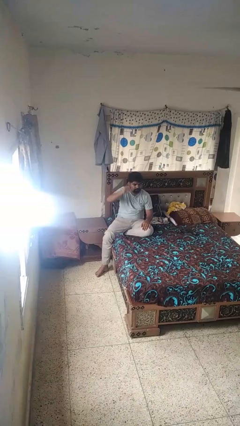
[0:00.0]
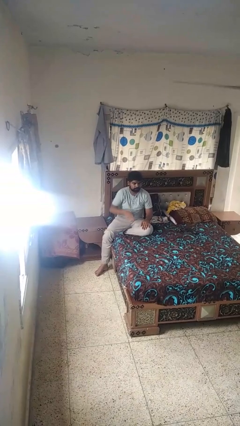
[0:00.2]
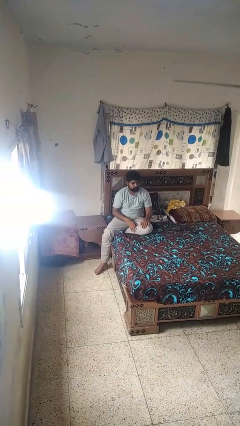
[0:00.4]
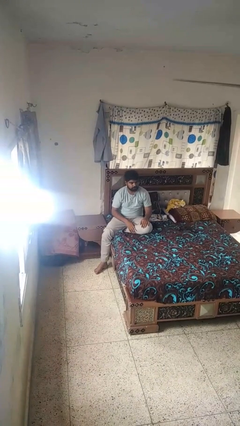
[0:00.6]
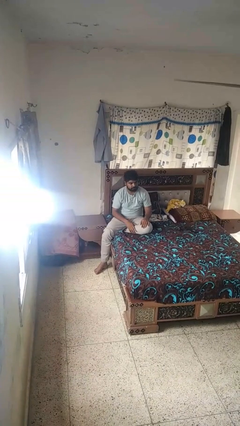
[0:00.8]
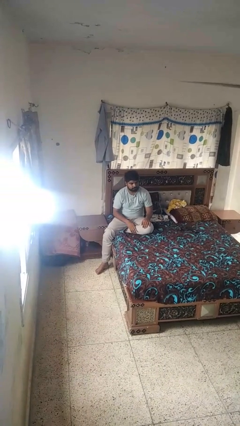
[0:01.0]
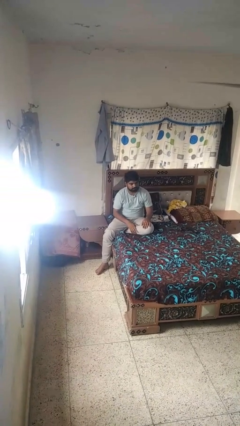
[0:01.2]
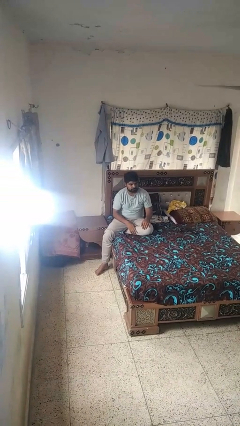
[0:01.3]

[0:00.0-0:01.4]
person gestures lower hand

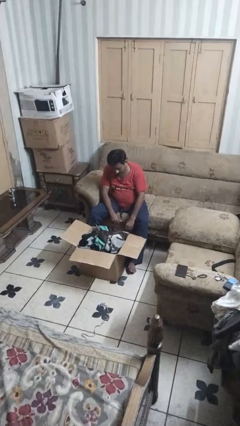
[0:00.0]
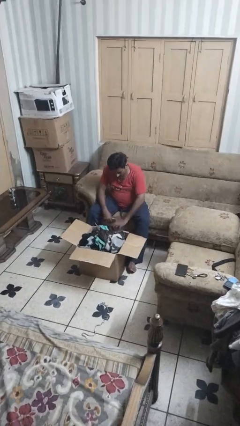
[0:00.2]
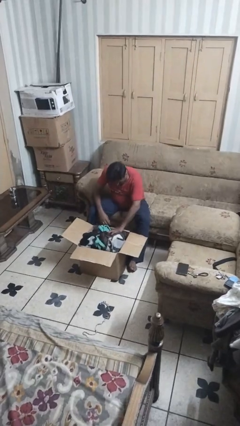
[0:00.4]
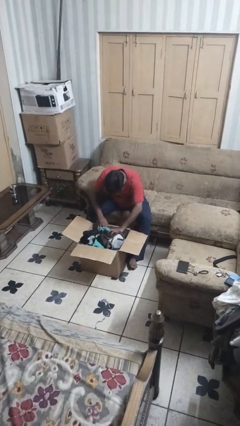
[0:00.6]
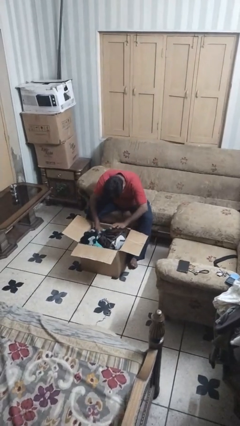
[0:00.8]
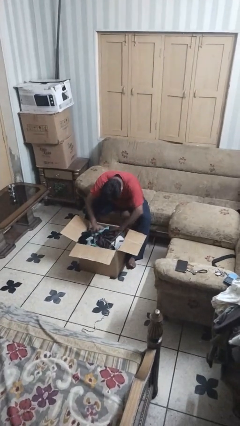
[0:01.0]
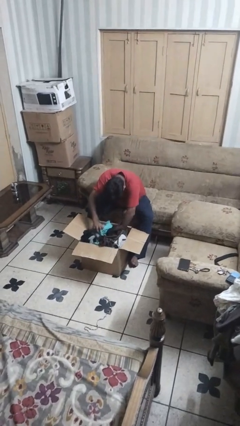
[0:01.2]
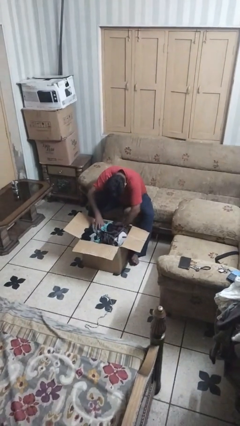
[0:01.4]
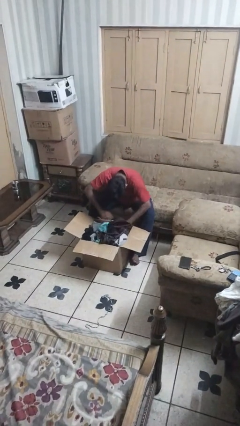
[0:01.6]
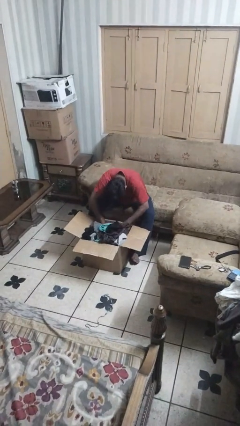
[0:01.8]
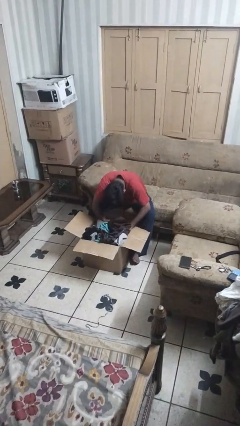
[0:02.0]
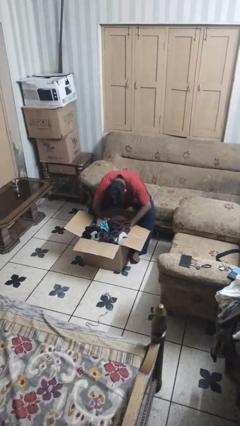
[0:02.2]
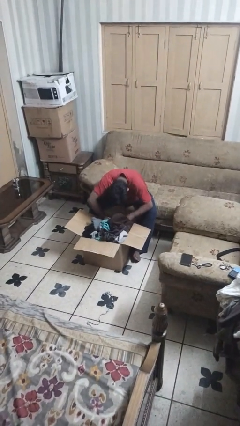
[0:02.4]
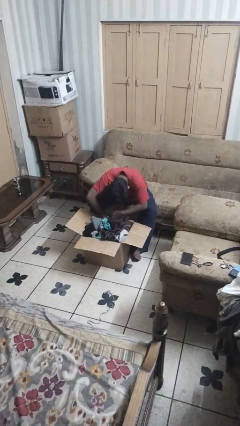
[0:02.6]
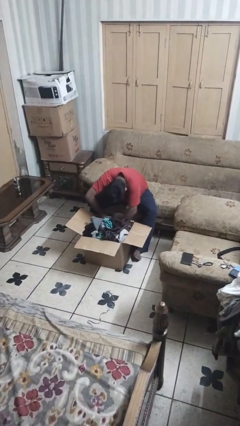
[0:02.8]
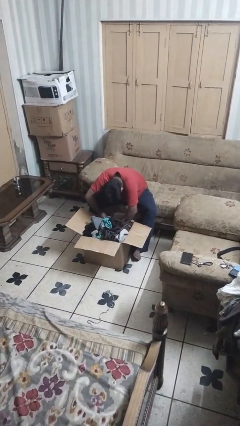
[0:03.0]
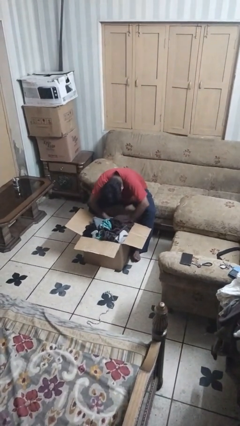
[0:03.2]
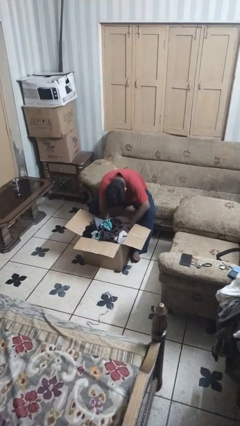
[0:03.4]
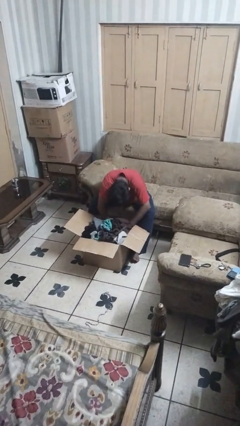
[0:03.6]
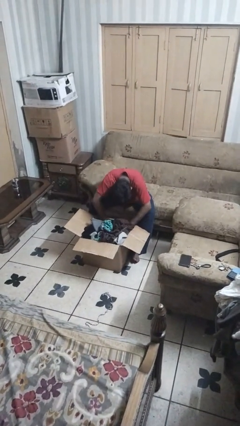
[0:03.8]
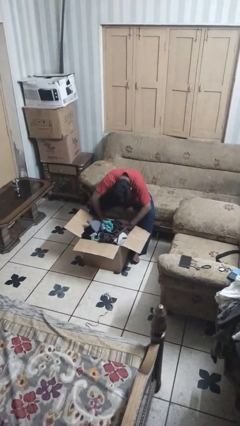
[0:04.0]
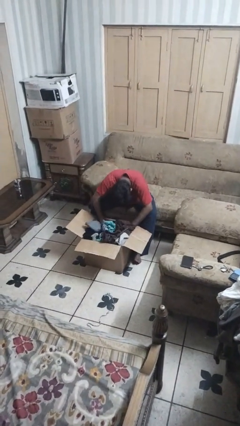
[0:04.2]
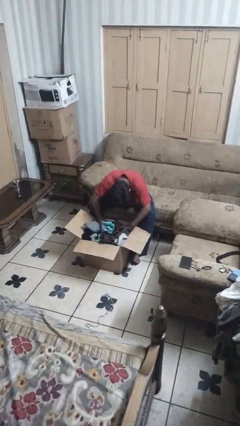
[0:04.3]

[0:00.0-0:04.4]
person searches in box

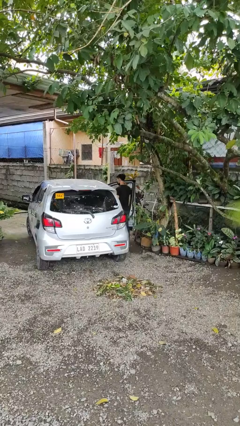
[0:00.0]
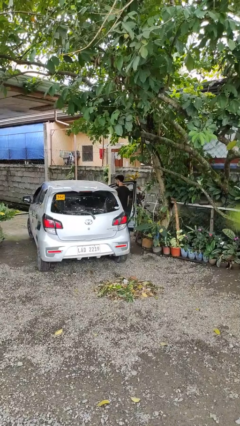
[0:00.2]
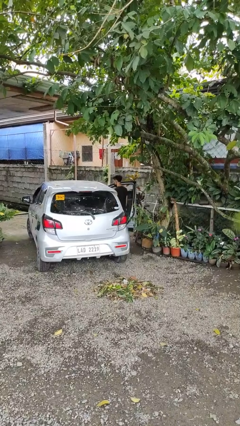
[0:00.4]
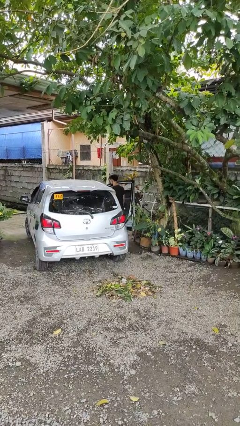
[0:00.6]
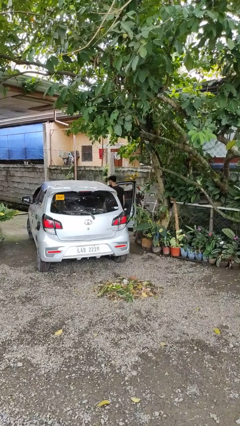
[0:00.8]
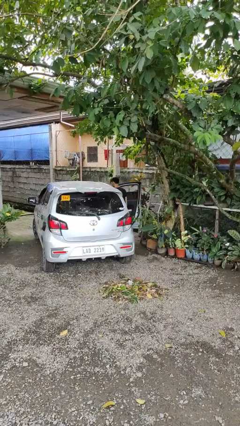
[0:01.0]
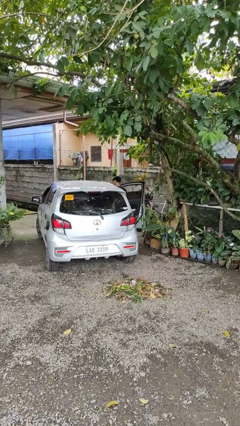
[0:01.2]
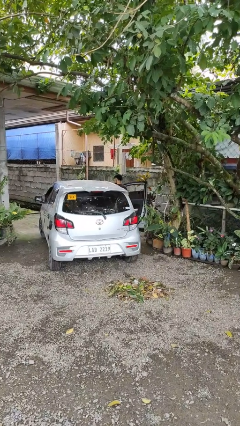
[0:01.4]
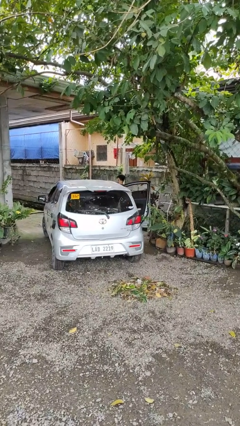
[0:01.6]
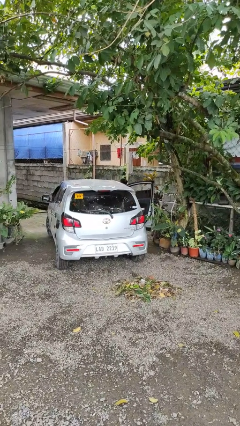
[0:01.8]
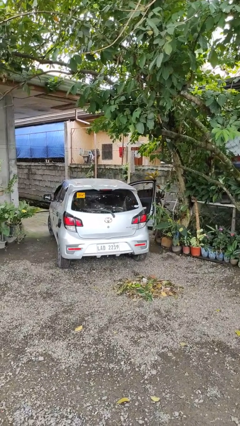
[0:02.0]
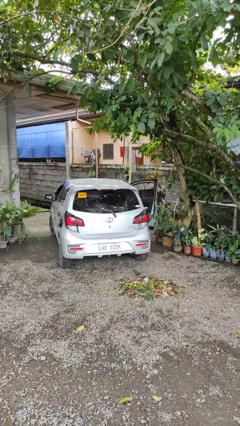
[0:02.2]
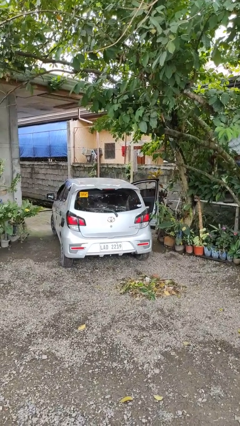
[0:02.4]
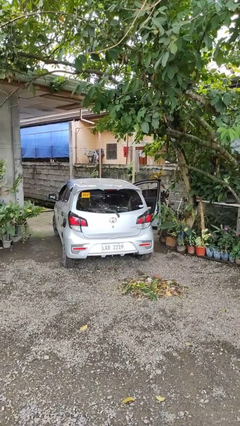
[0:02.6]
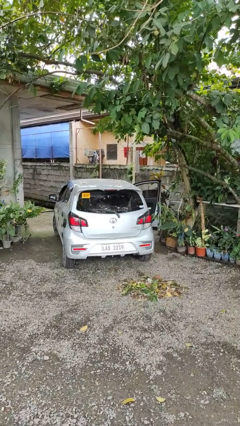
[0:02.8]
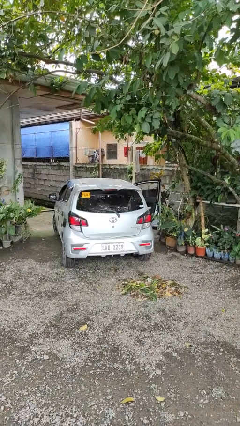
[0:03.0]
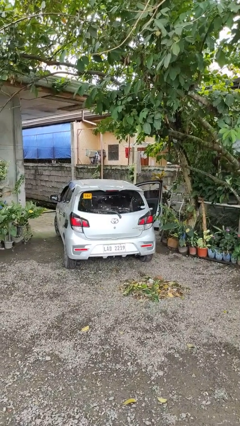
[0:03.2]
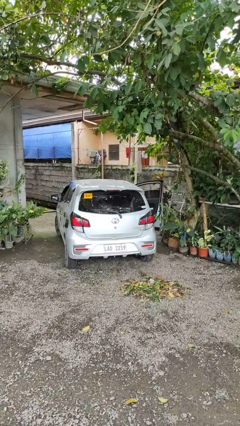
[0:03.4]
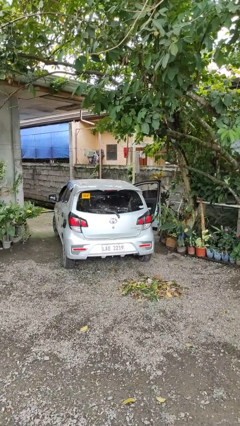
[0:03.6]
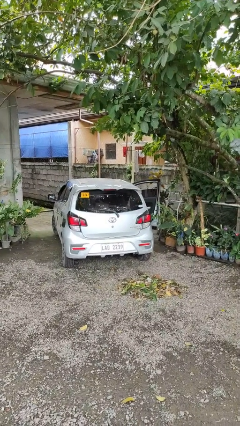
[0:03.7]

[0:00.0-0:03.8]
person enters car

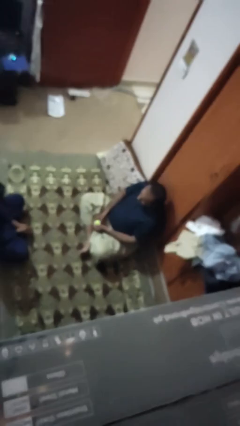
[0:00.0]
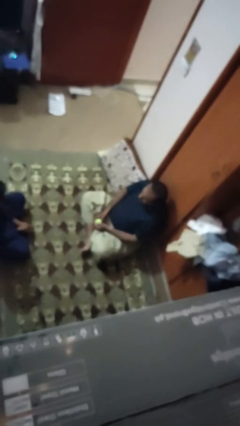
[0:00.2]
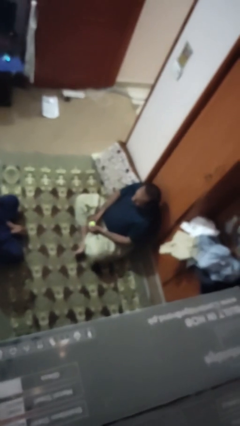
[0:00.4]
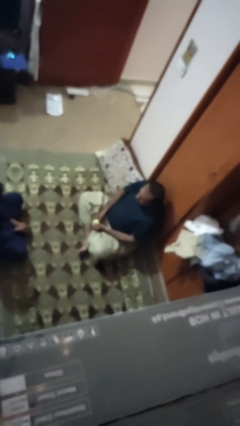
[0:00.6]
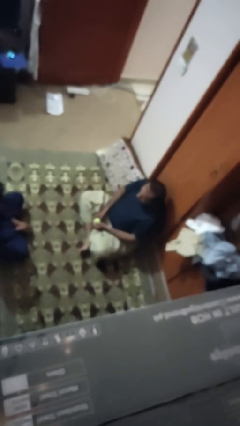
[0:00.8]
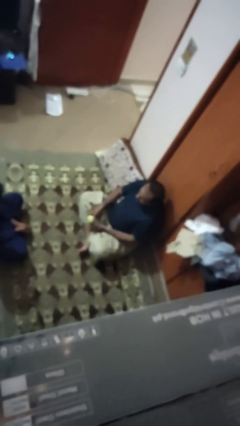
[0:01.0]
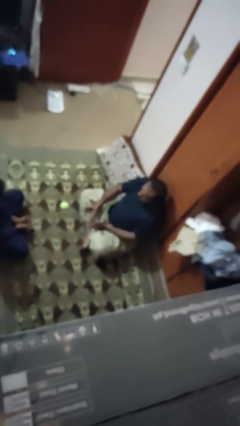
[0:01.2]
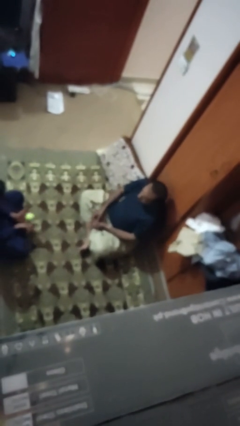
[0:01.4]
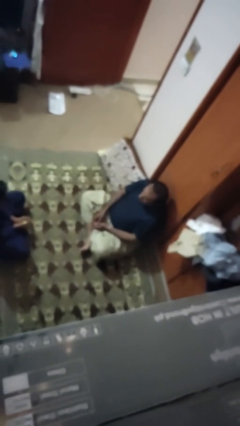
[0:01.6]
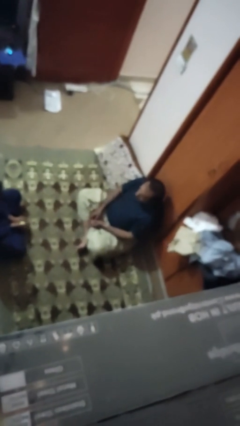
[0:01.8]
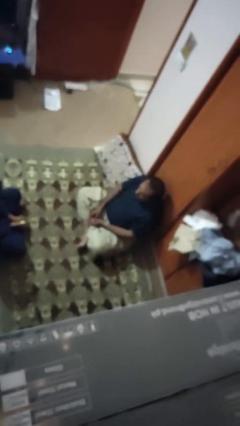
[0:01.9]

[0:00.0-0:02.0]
person throws object to person

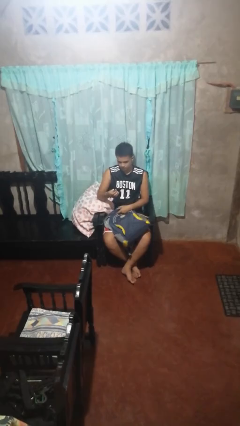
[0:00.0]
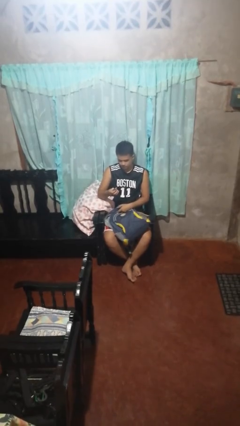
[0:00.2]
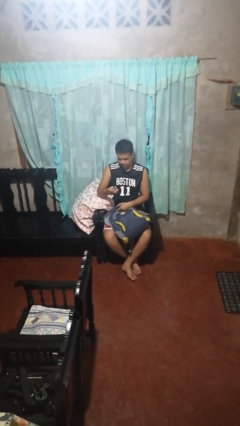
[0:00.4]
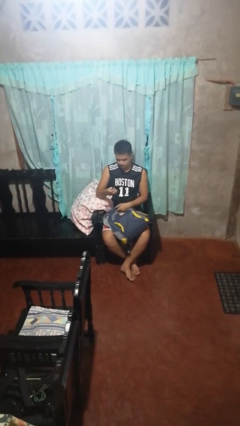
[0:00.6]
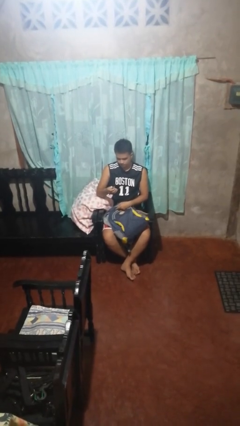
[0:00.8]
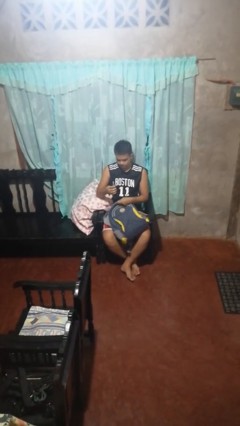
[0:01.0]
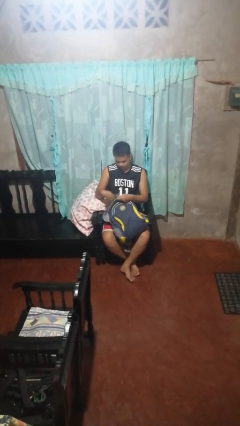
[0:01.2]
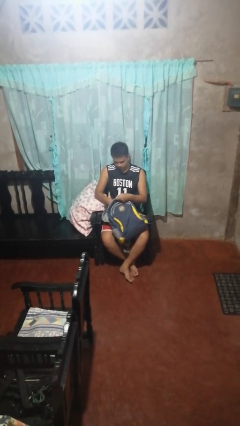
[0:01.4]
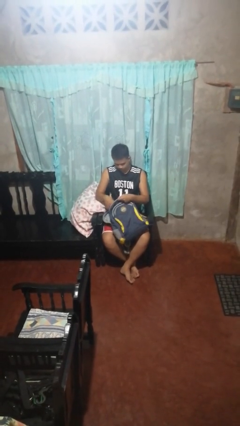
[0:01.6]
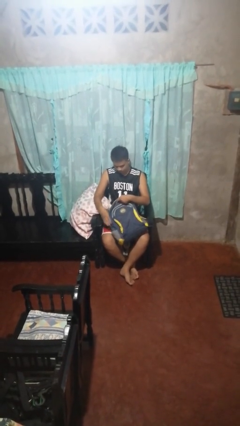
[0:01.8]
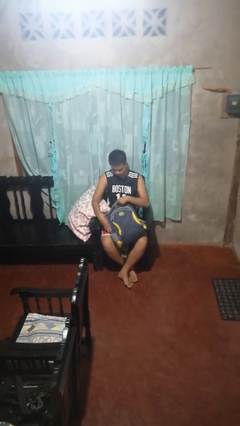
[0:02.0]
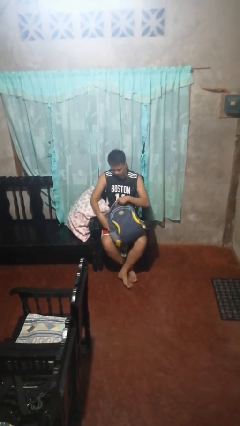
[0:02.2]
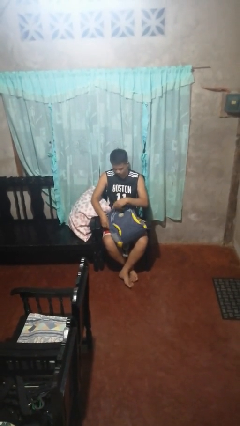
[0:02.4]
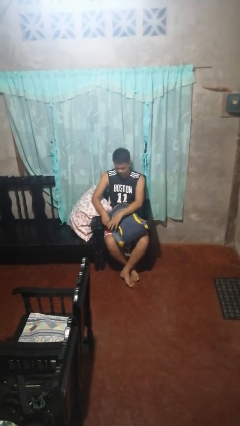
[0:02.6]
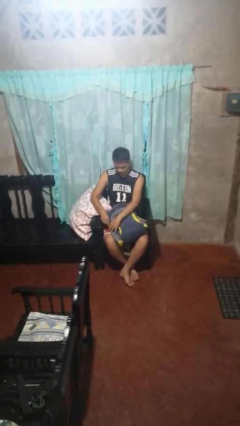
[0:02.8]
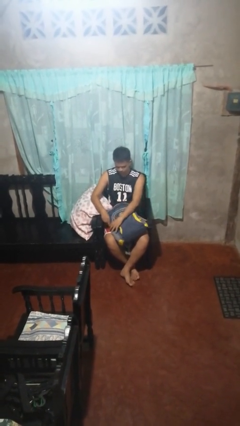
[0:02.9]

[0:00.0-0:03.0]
person puts object into backpack

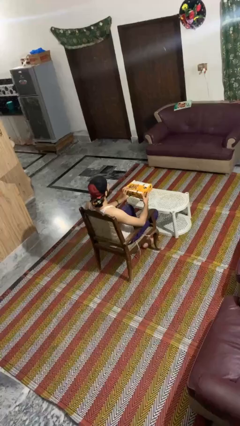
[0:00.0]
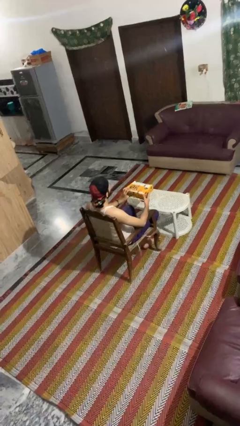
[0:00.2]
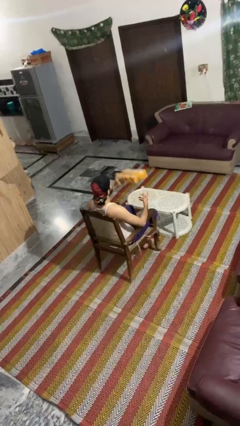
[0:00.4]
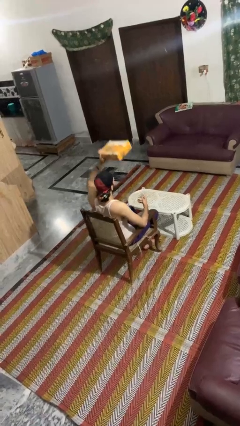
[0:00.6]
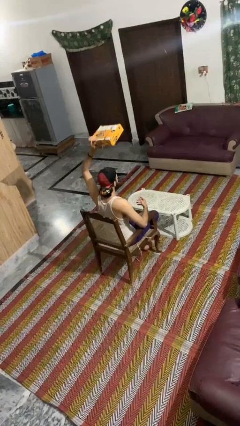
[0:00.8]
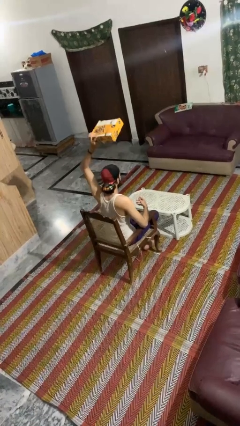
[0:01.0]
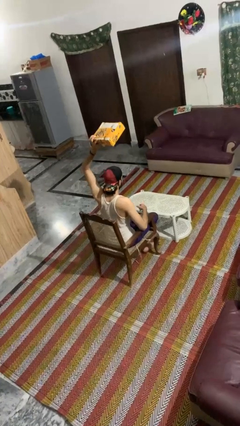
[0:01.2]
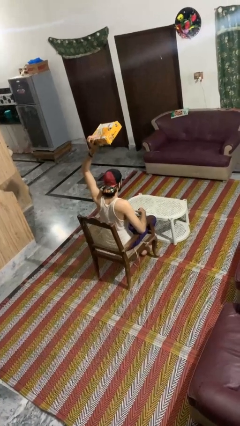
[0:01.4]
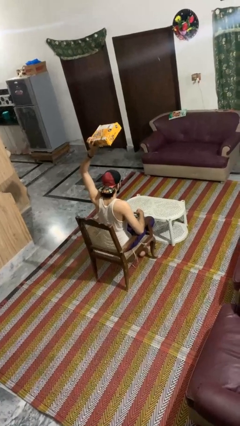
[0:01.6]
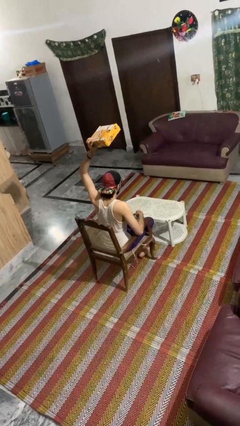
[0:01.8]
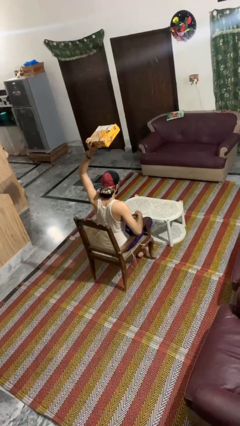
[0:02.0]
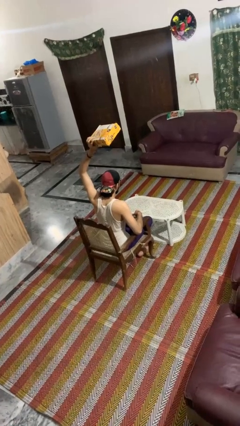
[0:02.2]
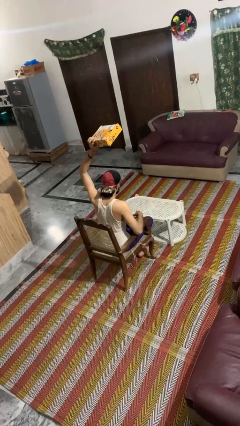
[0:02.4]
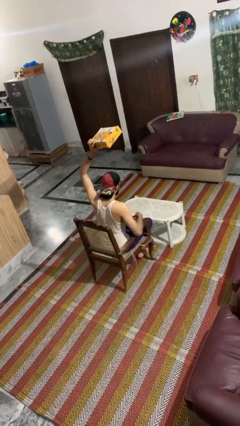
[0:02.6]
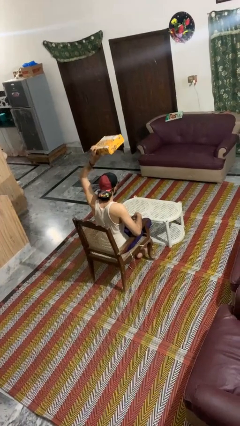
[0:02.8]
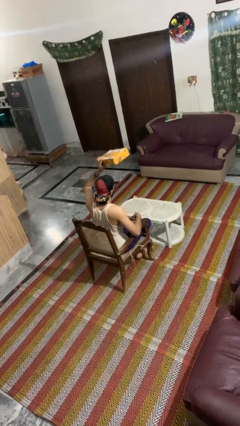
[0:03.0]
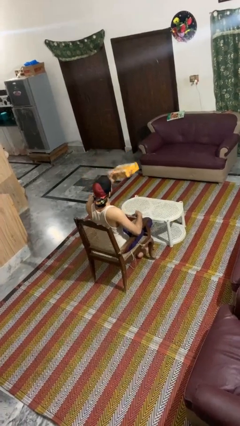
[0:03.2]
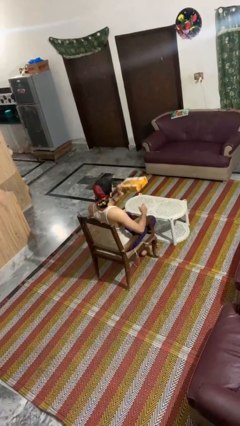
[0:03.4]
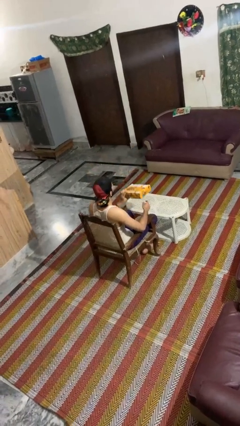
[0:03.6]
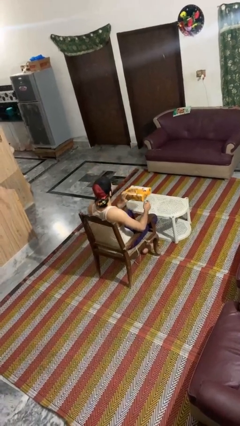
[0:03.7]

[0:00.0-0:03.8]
person holds object above head
